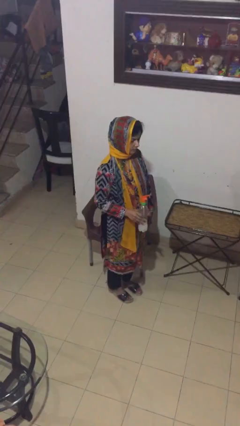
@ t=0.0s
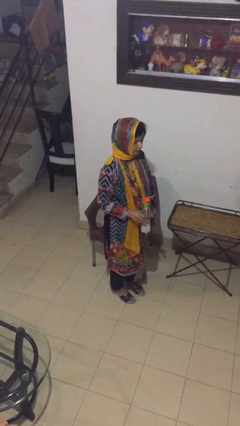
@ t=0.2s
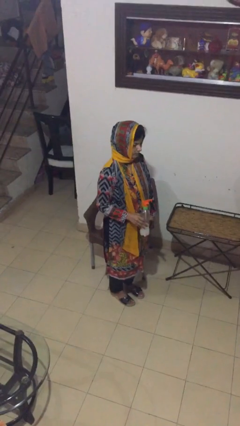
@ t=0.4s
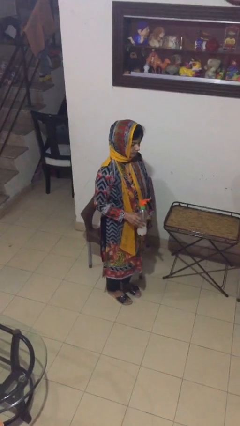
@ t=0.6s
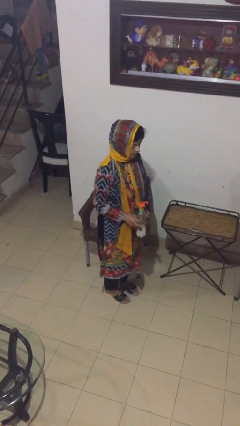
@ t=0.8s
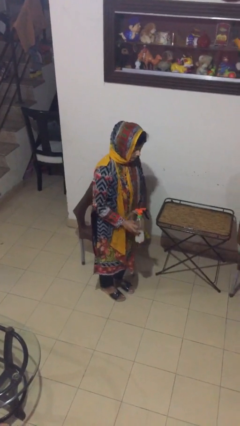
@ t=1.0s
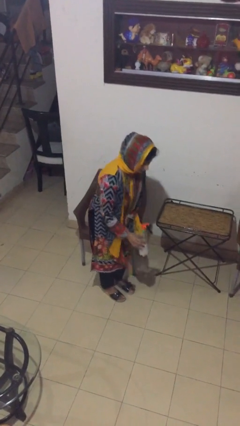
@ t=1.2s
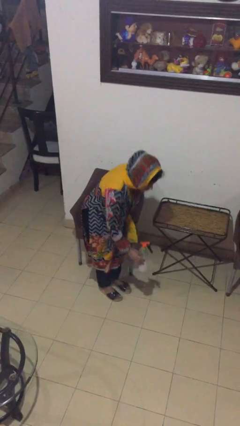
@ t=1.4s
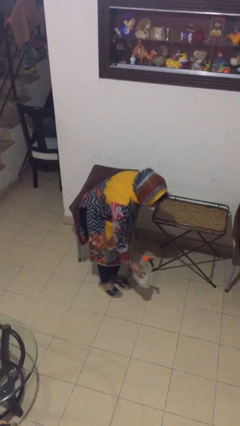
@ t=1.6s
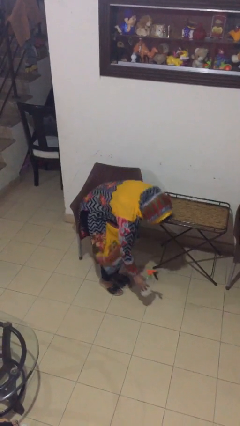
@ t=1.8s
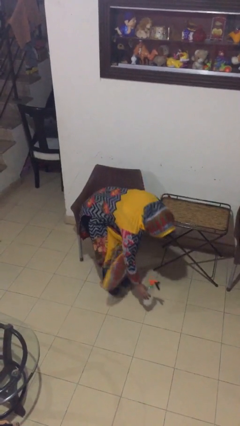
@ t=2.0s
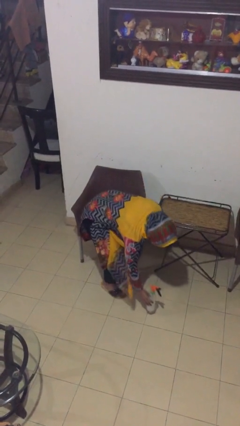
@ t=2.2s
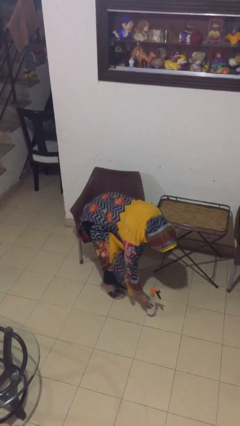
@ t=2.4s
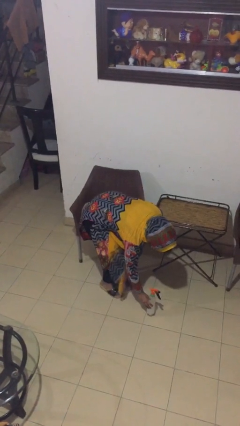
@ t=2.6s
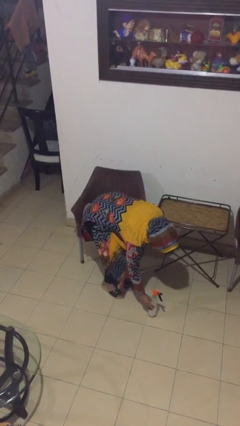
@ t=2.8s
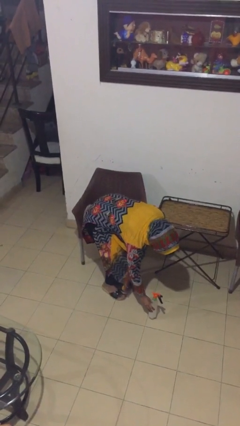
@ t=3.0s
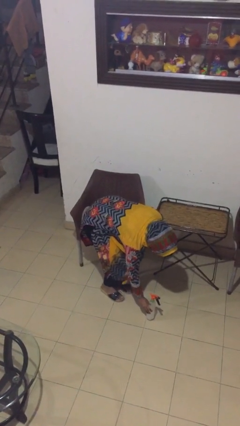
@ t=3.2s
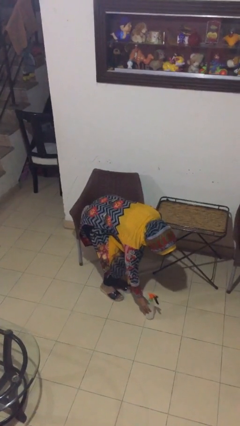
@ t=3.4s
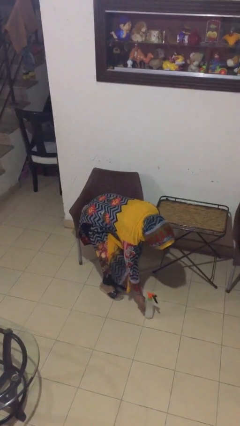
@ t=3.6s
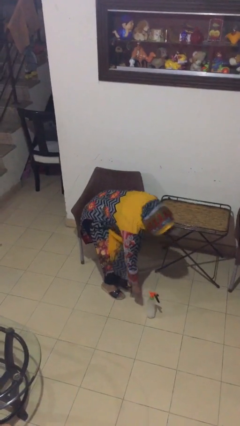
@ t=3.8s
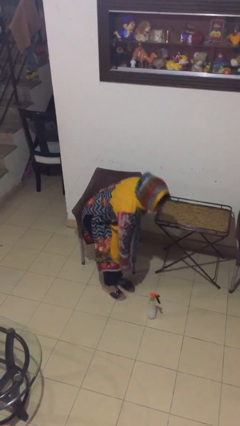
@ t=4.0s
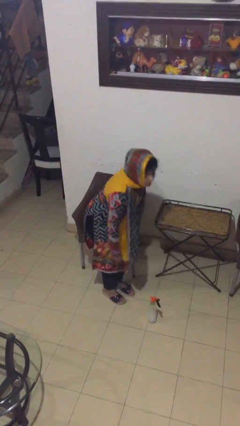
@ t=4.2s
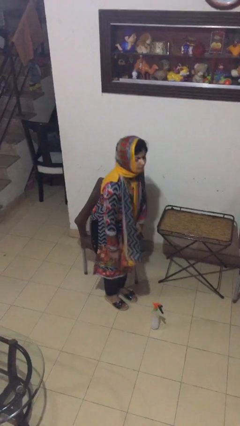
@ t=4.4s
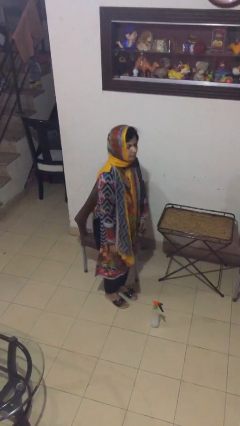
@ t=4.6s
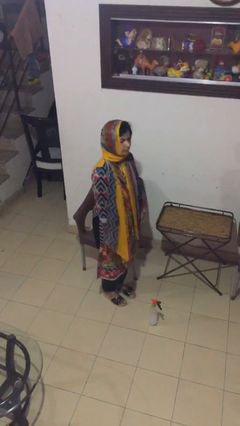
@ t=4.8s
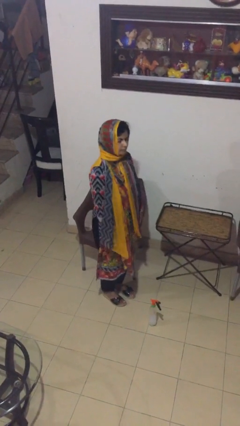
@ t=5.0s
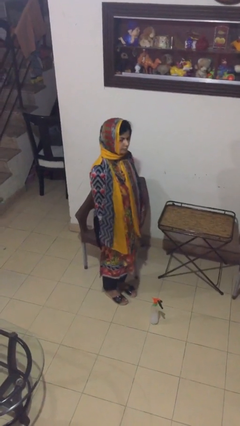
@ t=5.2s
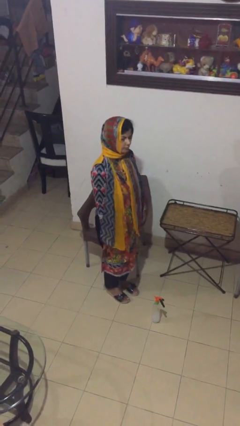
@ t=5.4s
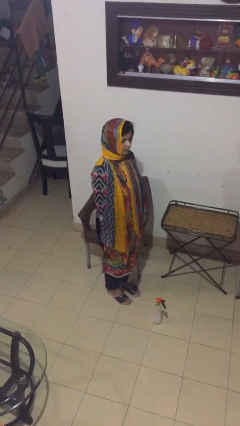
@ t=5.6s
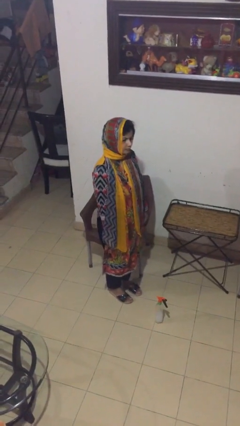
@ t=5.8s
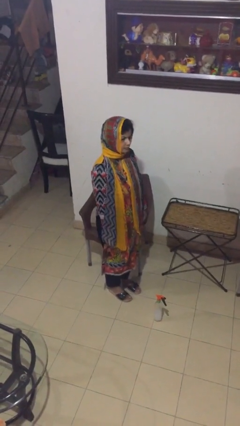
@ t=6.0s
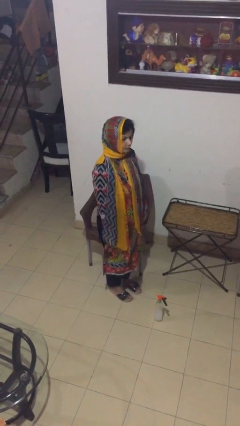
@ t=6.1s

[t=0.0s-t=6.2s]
person puts down object on floor

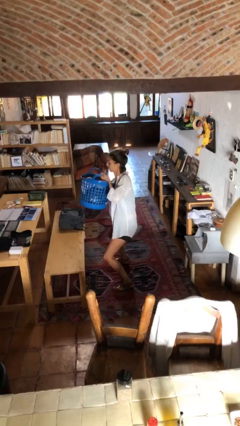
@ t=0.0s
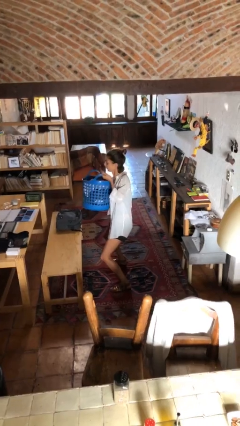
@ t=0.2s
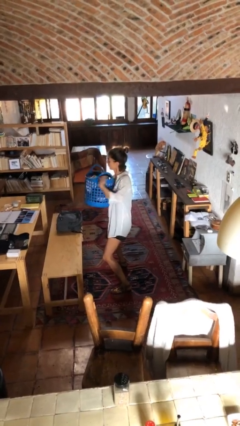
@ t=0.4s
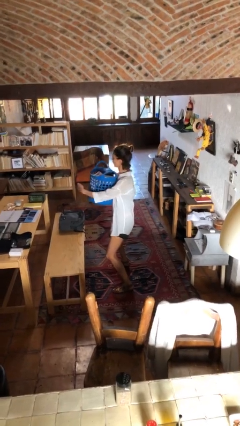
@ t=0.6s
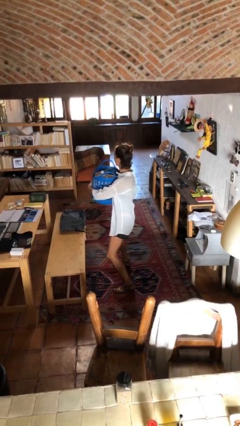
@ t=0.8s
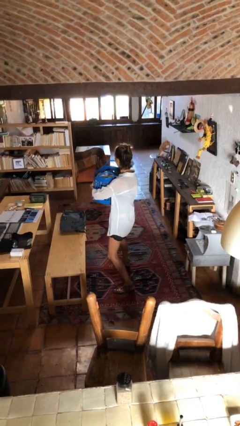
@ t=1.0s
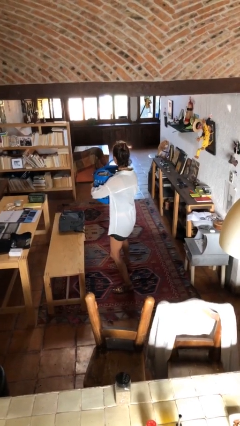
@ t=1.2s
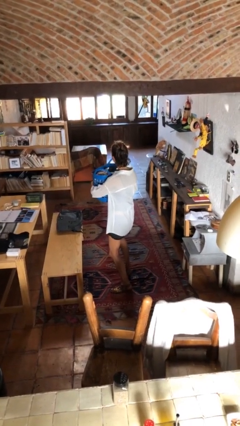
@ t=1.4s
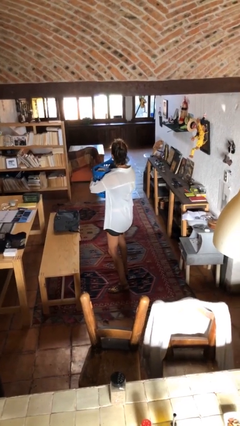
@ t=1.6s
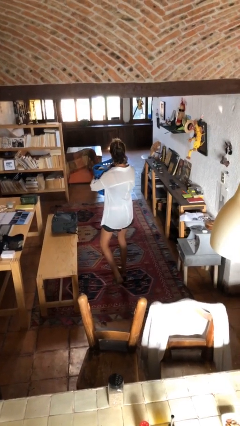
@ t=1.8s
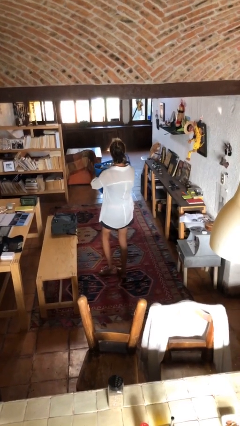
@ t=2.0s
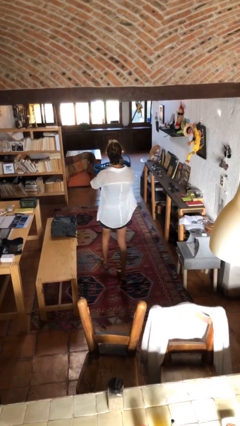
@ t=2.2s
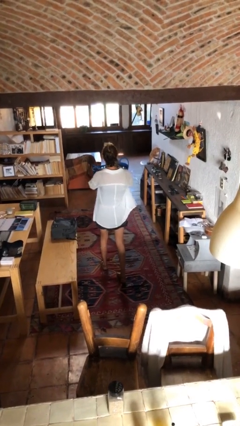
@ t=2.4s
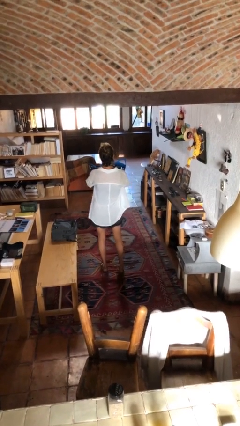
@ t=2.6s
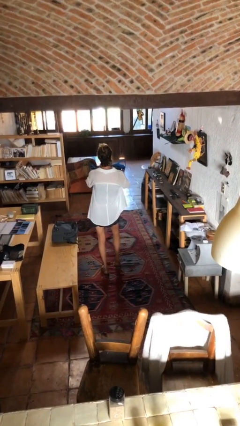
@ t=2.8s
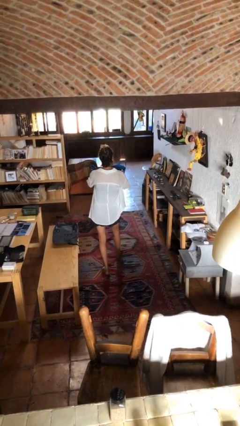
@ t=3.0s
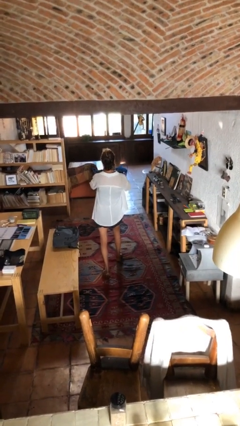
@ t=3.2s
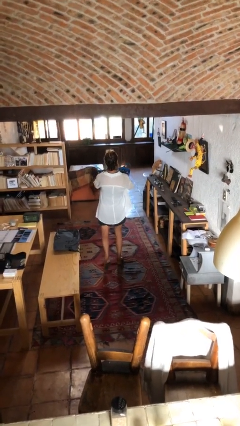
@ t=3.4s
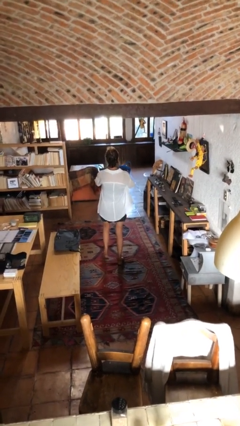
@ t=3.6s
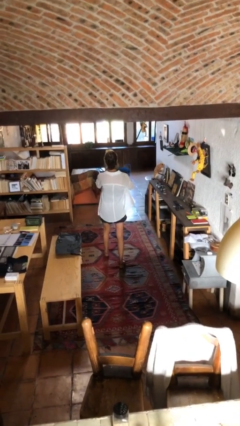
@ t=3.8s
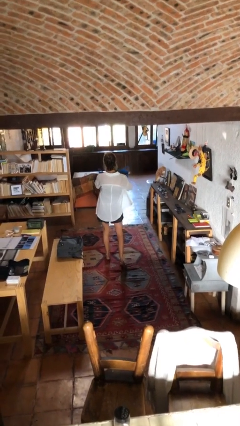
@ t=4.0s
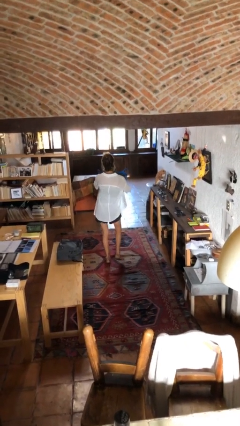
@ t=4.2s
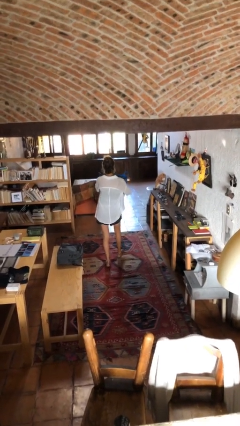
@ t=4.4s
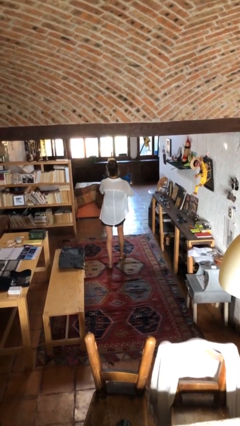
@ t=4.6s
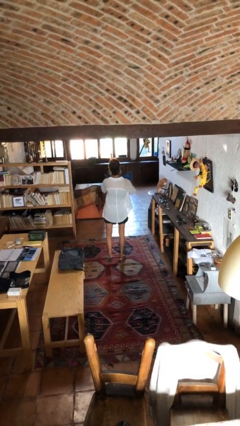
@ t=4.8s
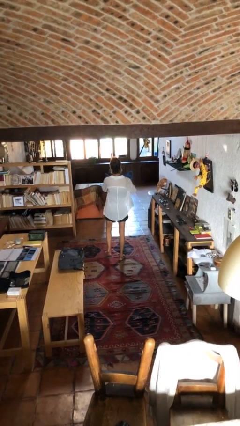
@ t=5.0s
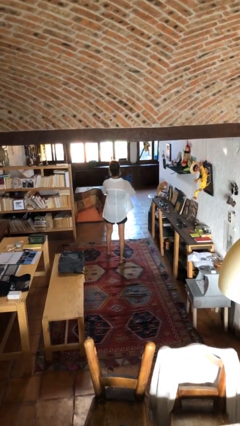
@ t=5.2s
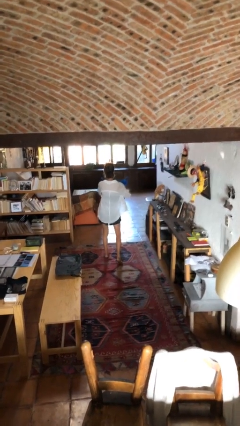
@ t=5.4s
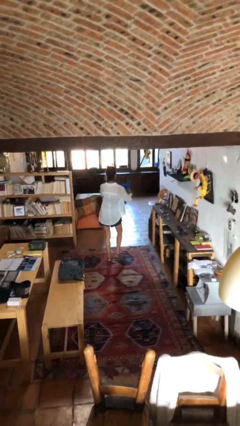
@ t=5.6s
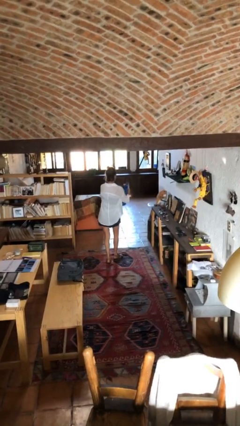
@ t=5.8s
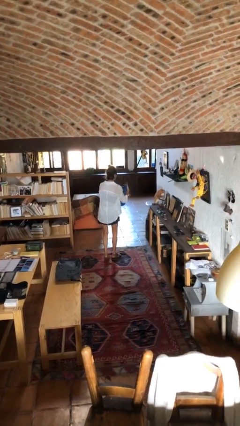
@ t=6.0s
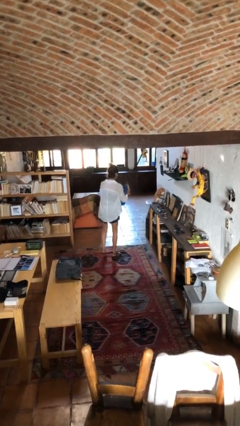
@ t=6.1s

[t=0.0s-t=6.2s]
person carries heavy object

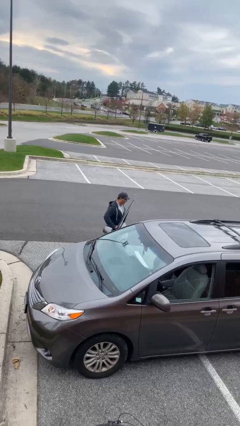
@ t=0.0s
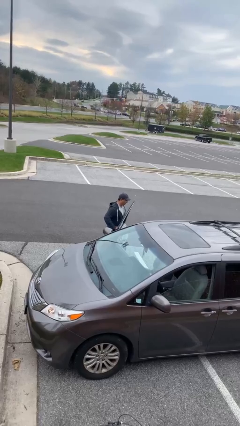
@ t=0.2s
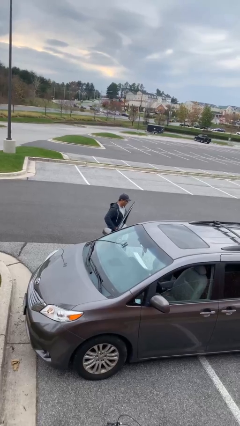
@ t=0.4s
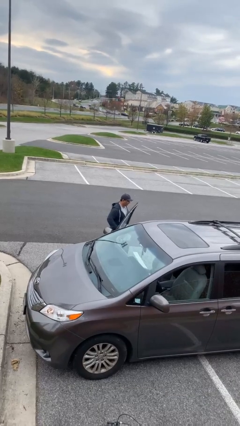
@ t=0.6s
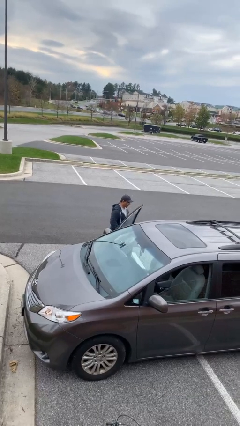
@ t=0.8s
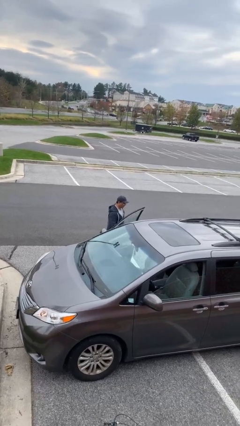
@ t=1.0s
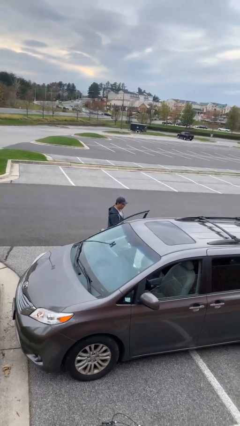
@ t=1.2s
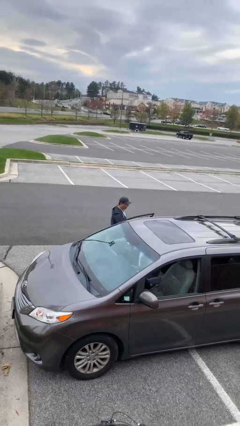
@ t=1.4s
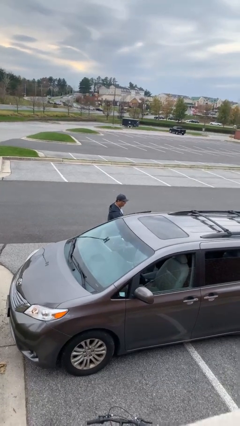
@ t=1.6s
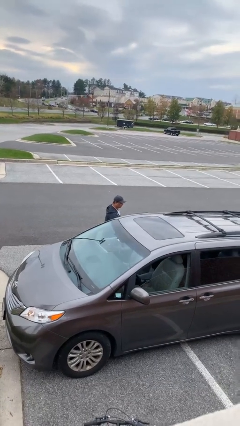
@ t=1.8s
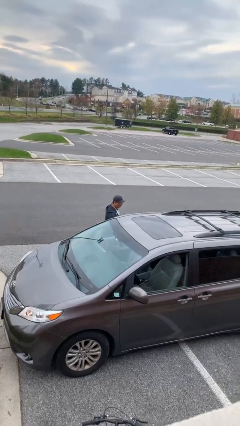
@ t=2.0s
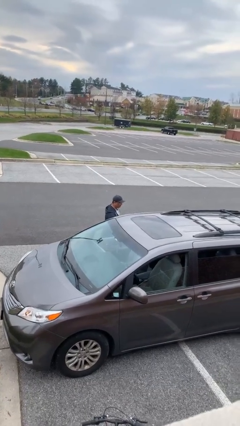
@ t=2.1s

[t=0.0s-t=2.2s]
person closes car door

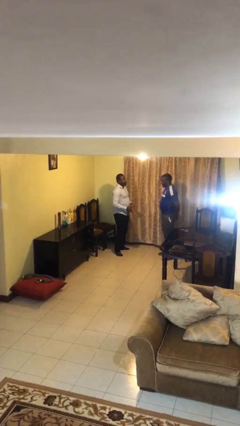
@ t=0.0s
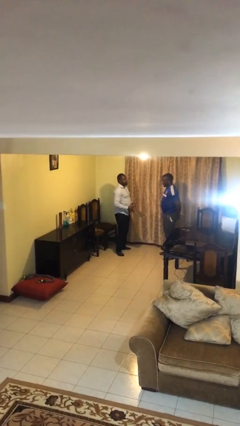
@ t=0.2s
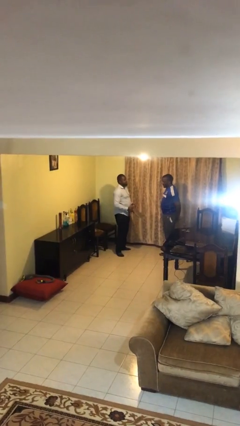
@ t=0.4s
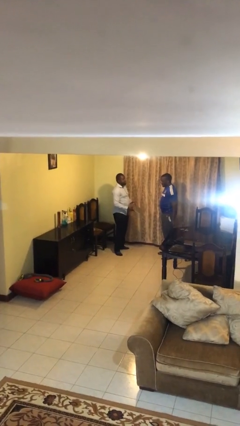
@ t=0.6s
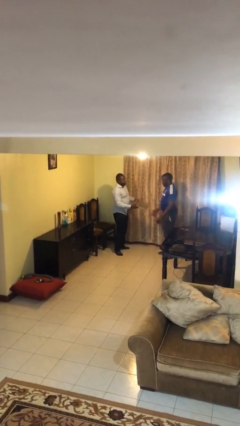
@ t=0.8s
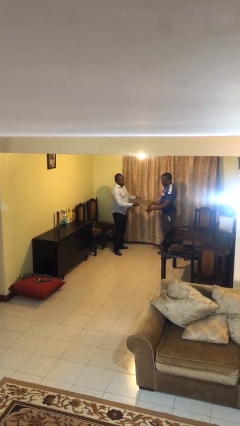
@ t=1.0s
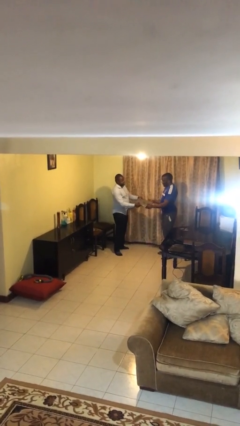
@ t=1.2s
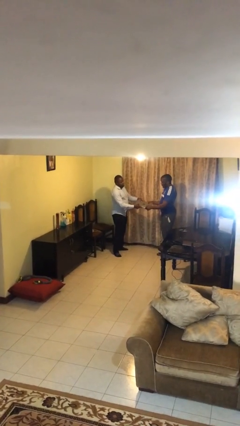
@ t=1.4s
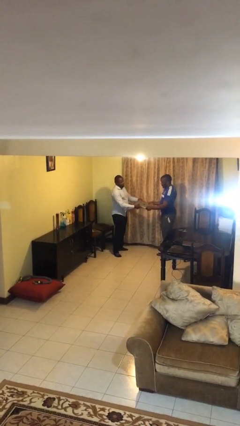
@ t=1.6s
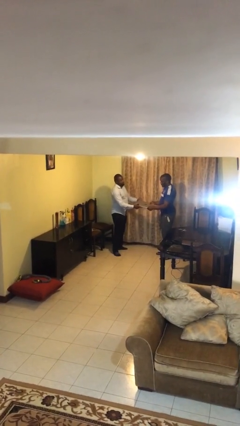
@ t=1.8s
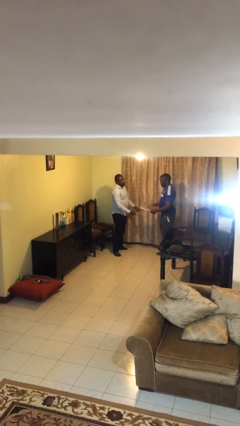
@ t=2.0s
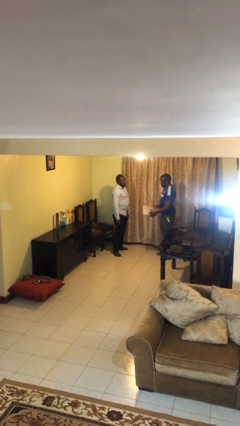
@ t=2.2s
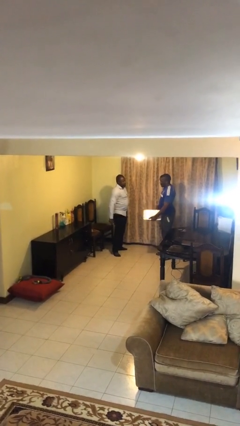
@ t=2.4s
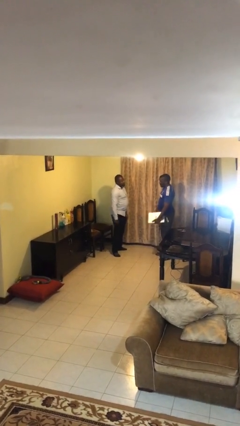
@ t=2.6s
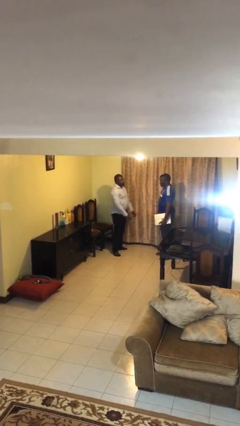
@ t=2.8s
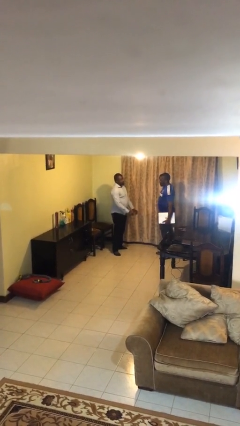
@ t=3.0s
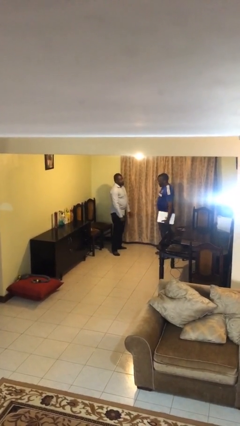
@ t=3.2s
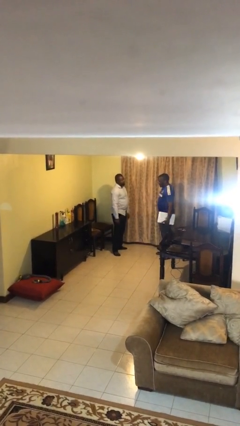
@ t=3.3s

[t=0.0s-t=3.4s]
person transfers object to person
